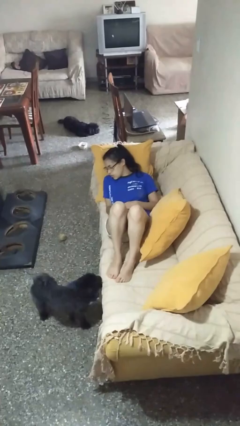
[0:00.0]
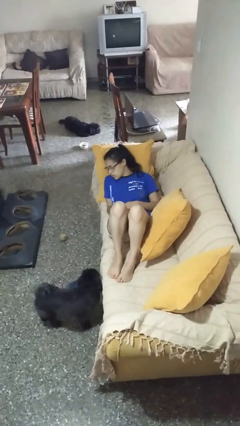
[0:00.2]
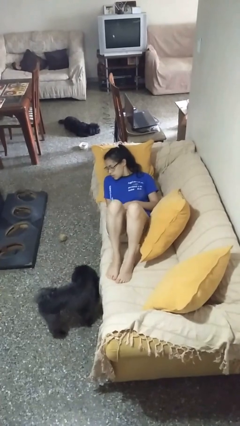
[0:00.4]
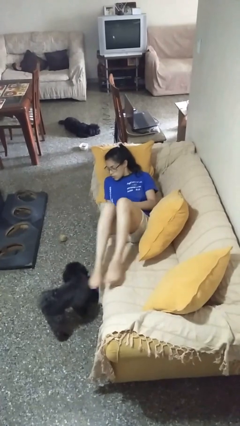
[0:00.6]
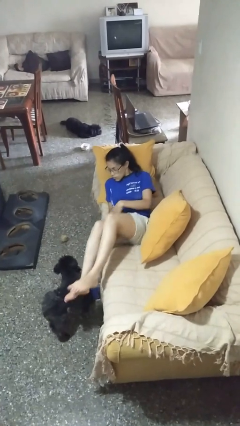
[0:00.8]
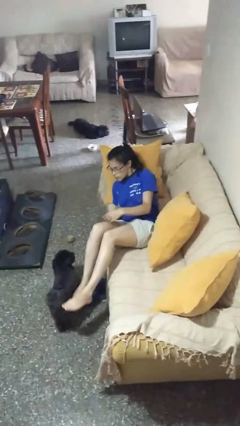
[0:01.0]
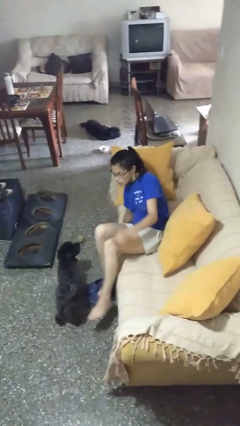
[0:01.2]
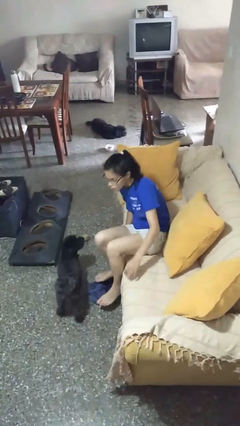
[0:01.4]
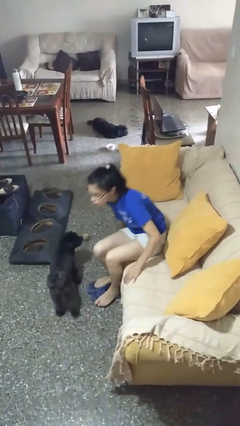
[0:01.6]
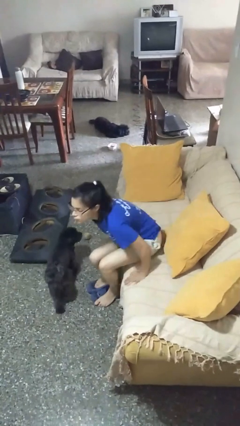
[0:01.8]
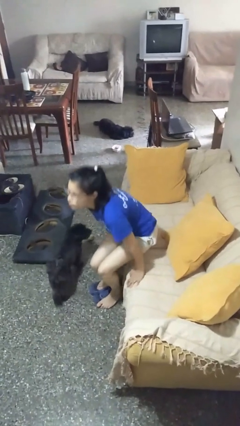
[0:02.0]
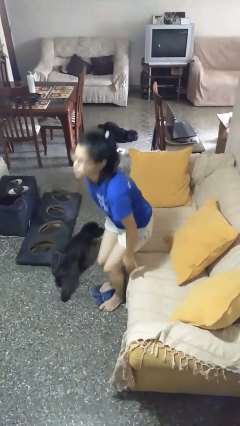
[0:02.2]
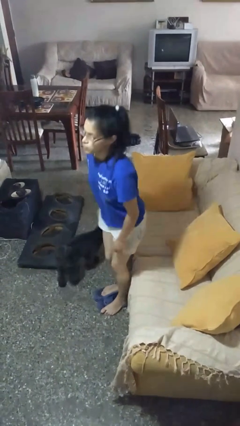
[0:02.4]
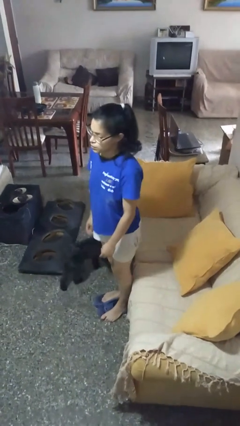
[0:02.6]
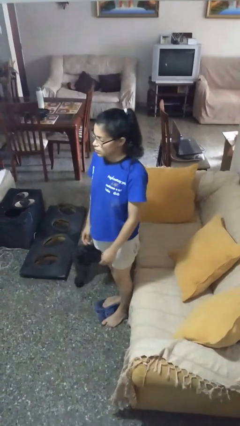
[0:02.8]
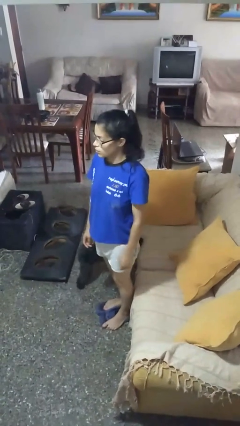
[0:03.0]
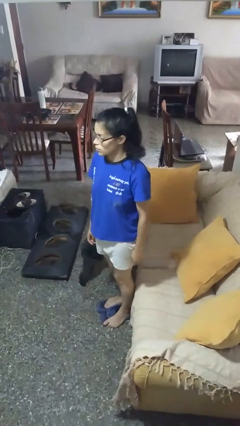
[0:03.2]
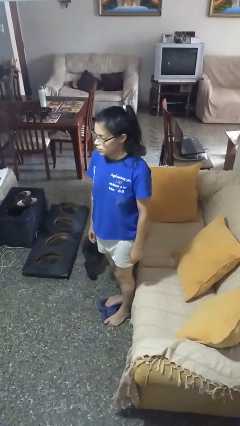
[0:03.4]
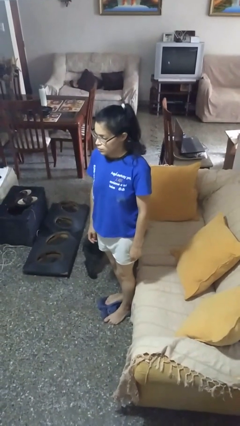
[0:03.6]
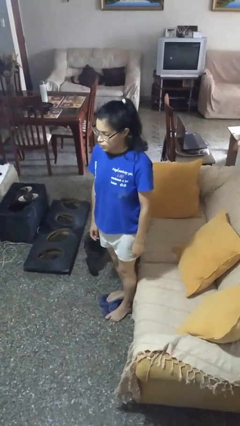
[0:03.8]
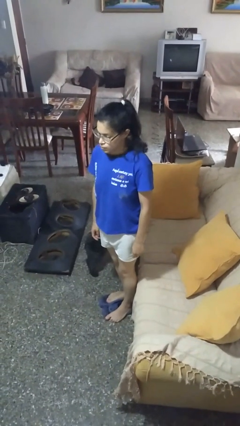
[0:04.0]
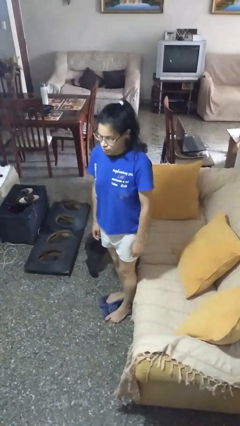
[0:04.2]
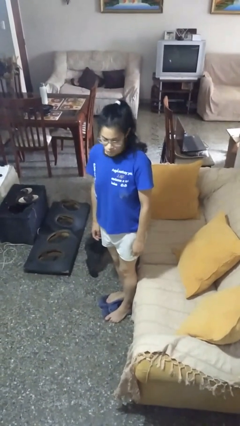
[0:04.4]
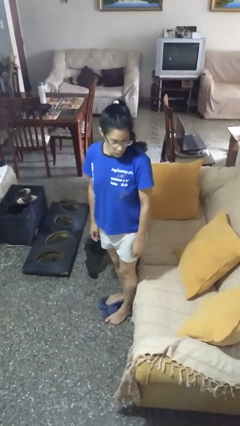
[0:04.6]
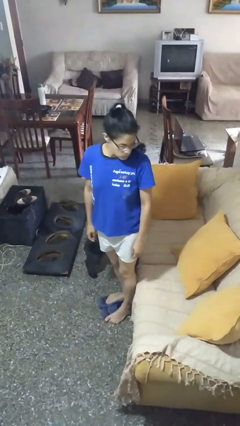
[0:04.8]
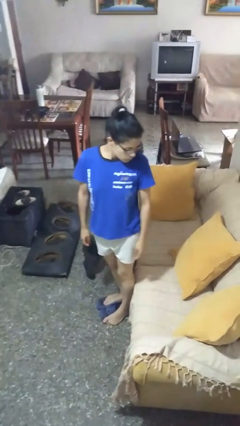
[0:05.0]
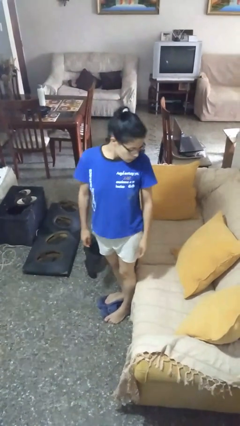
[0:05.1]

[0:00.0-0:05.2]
person stands up

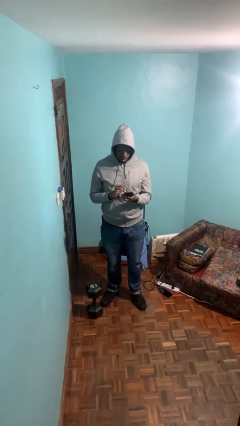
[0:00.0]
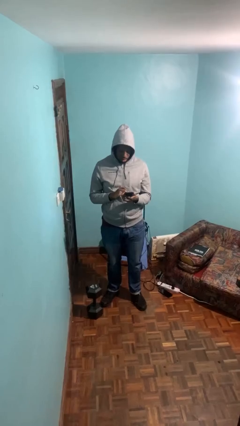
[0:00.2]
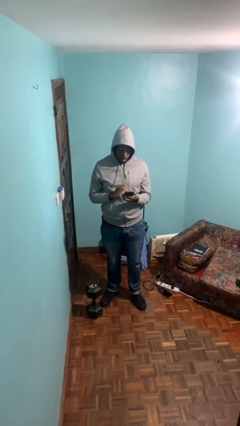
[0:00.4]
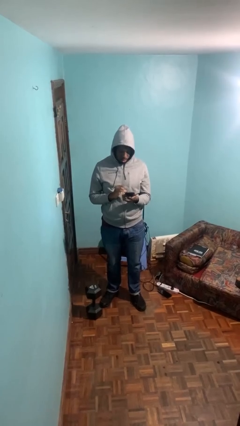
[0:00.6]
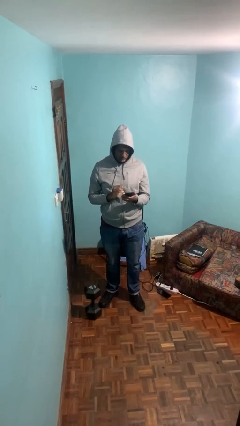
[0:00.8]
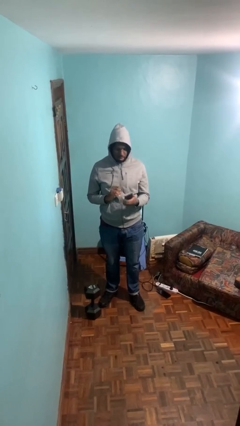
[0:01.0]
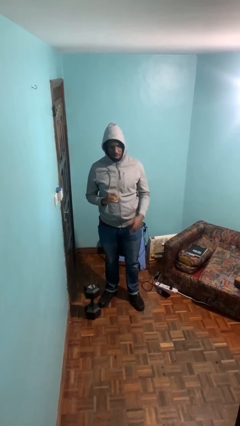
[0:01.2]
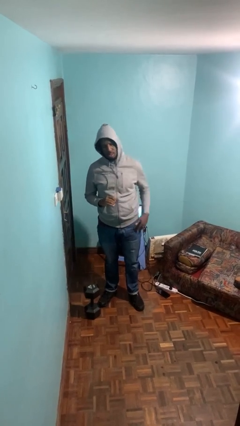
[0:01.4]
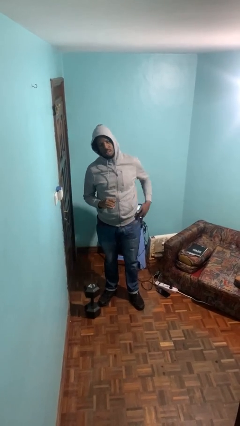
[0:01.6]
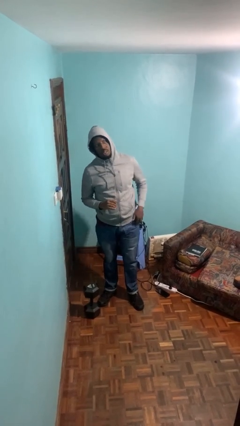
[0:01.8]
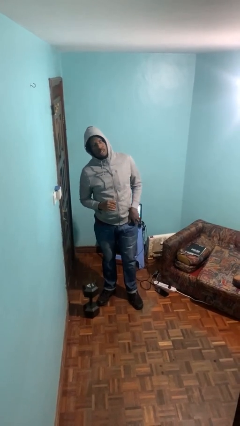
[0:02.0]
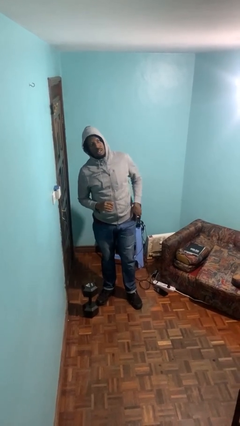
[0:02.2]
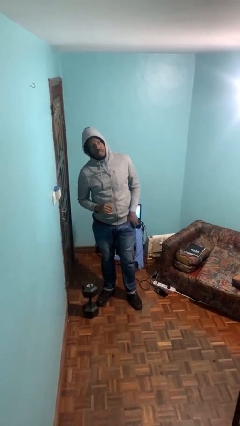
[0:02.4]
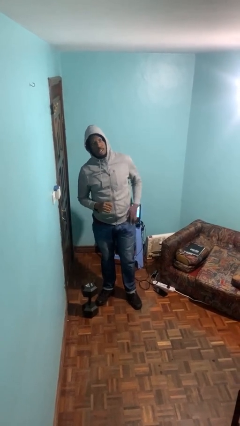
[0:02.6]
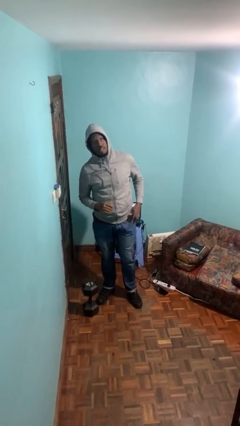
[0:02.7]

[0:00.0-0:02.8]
person puts phone into pocket

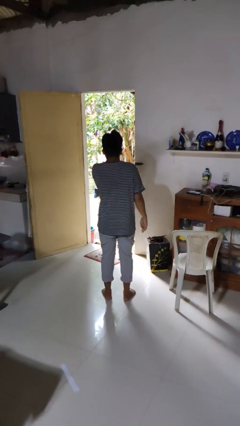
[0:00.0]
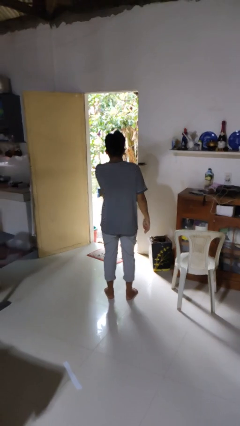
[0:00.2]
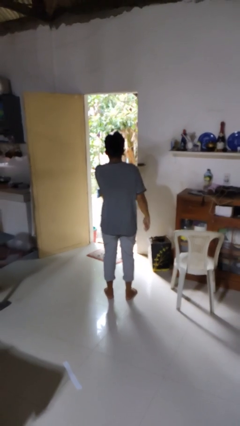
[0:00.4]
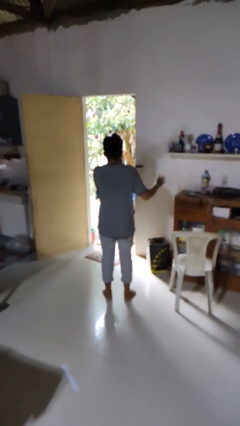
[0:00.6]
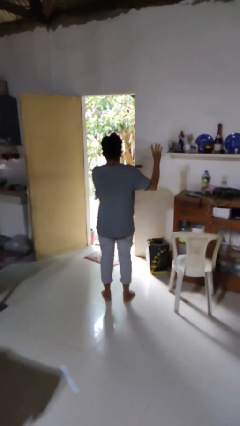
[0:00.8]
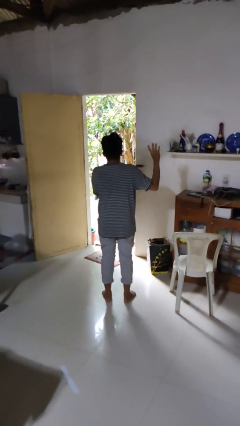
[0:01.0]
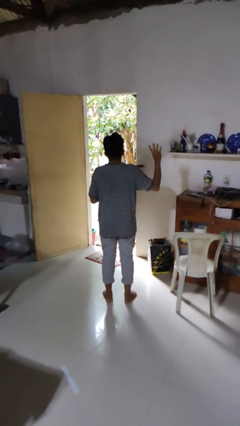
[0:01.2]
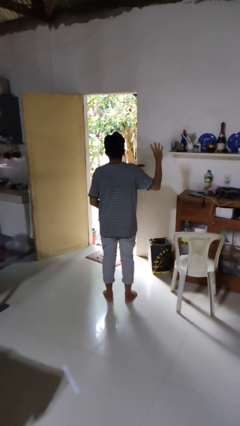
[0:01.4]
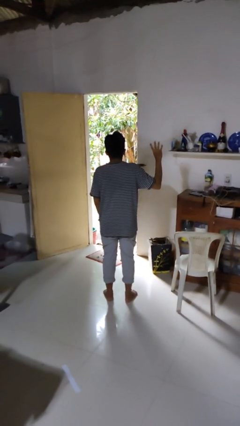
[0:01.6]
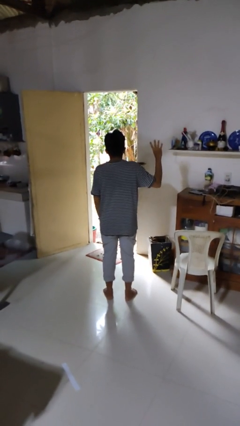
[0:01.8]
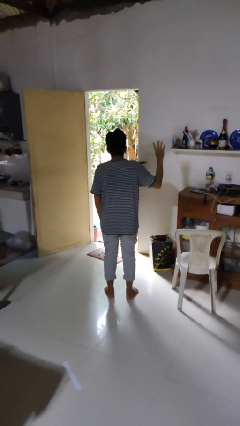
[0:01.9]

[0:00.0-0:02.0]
person gestures number four

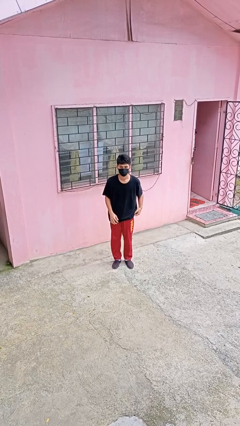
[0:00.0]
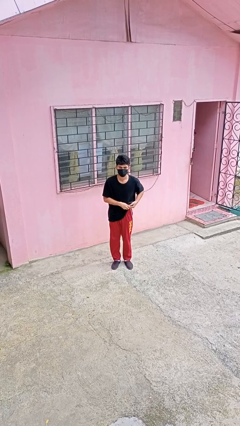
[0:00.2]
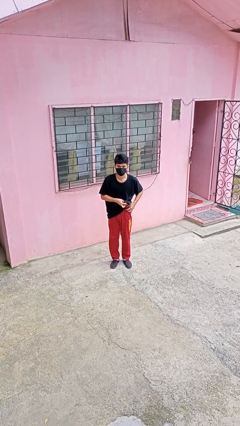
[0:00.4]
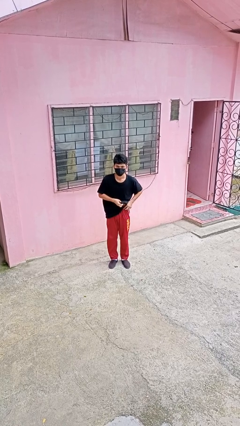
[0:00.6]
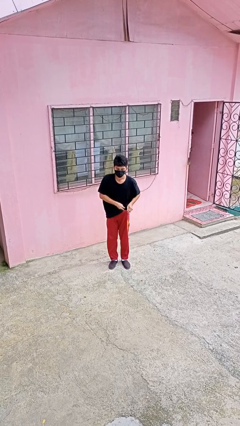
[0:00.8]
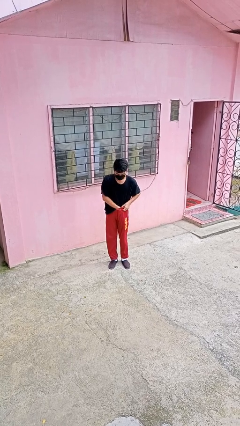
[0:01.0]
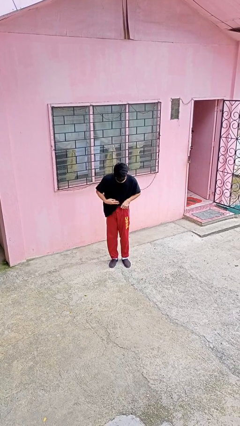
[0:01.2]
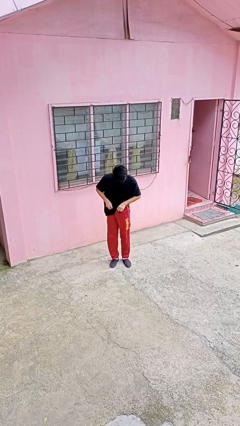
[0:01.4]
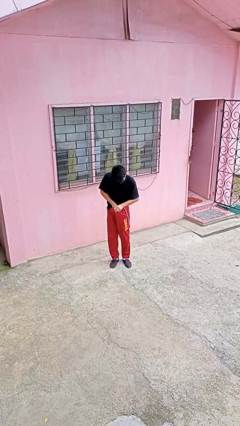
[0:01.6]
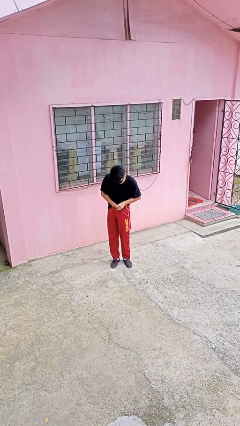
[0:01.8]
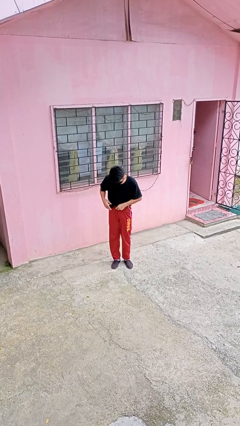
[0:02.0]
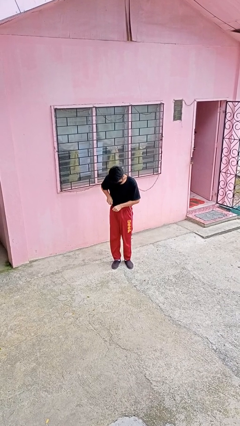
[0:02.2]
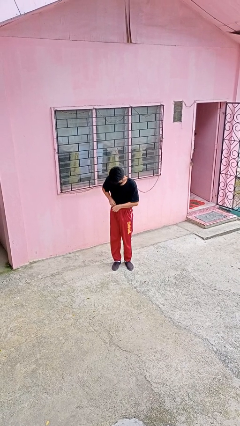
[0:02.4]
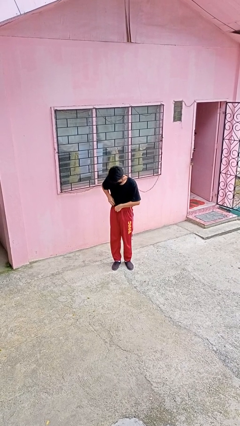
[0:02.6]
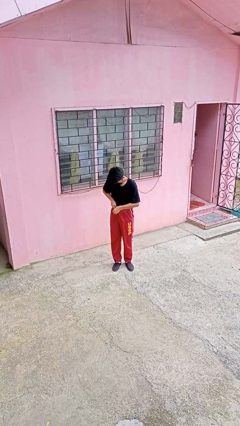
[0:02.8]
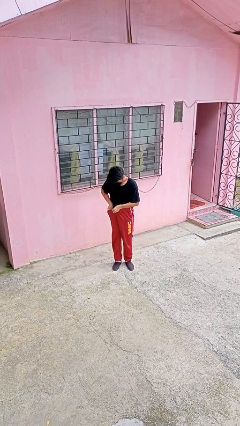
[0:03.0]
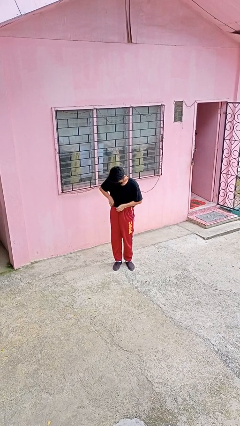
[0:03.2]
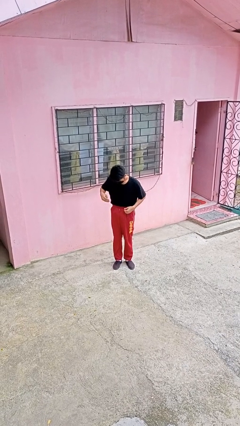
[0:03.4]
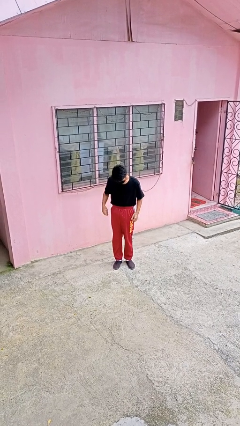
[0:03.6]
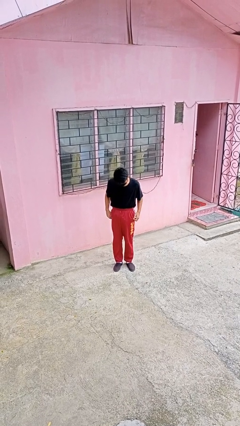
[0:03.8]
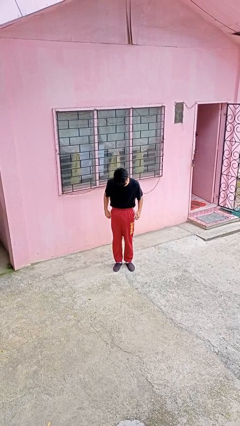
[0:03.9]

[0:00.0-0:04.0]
person tucks in shirt

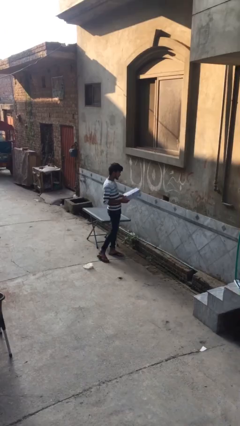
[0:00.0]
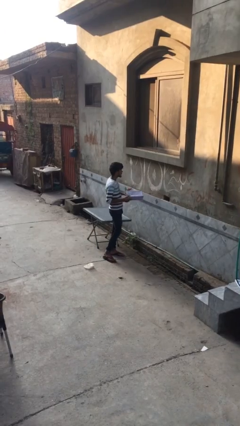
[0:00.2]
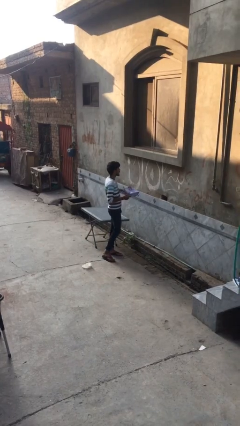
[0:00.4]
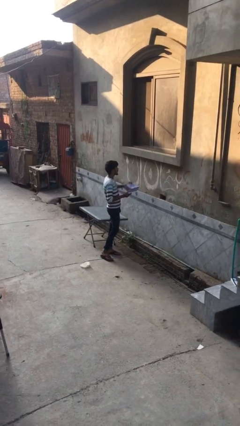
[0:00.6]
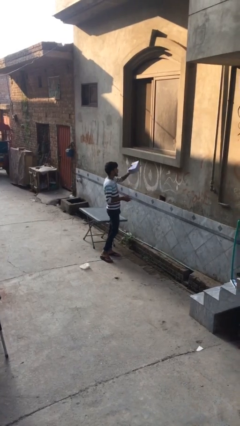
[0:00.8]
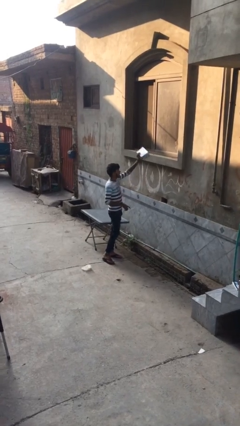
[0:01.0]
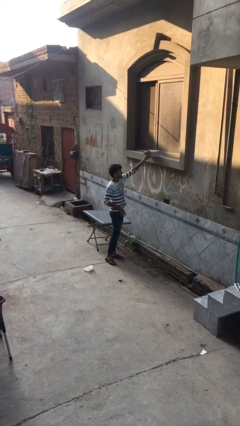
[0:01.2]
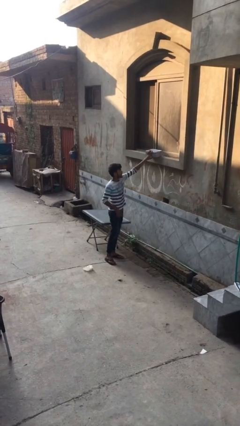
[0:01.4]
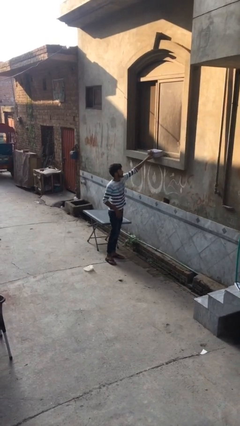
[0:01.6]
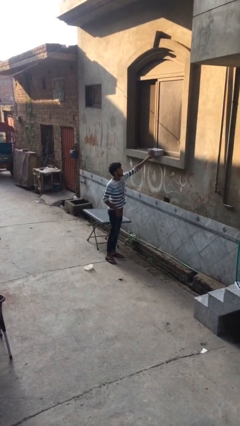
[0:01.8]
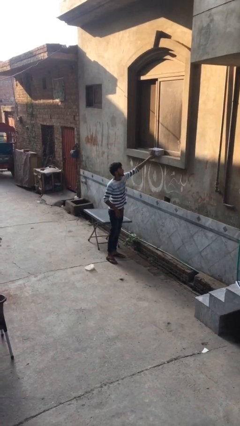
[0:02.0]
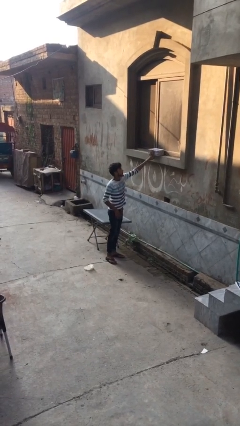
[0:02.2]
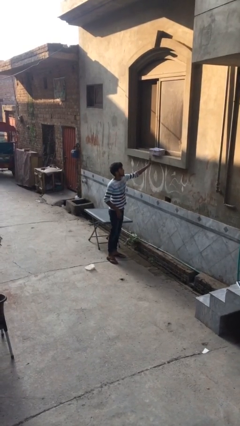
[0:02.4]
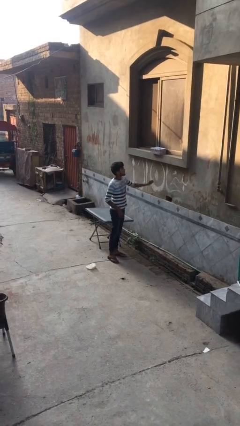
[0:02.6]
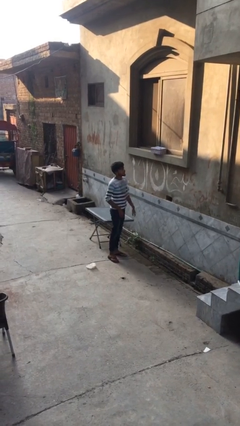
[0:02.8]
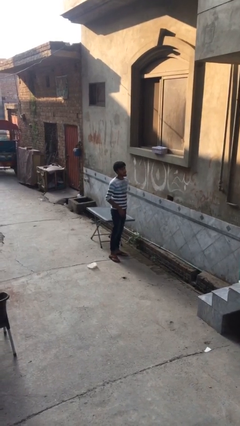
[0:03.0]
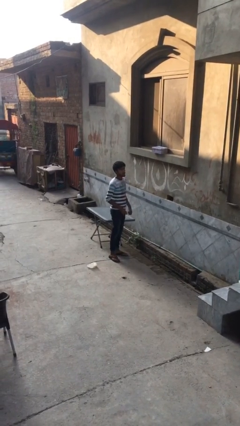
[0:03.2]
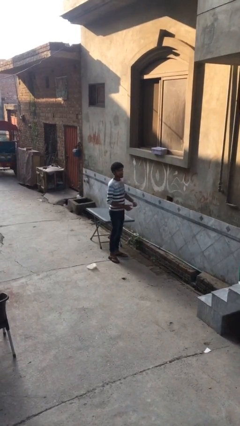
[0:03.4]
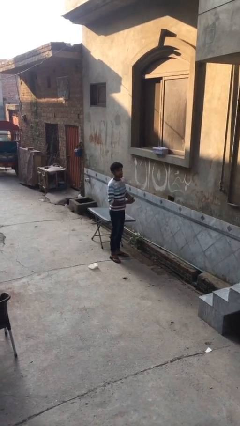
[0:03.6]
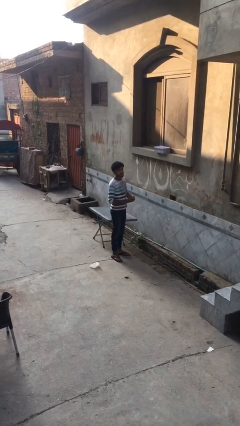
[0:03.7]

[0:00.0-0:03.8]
person puts down object on shelf
